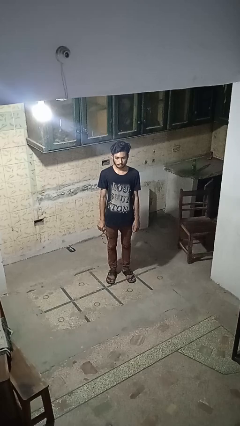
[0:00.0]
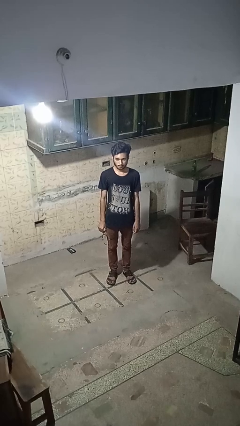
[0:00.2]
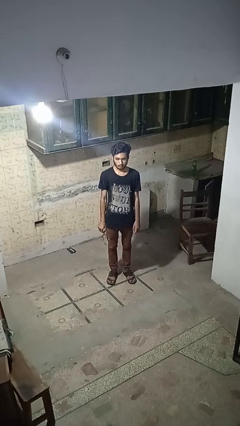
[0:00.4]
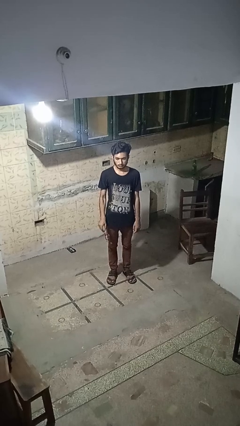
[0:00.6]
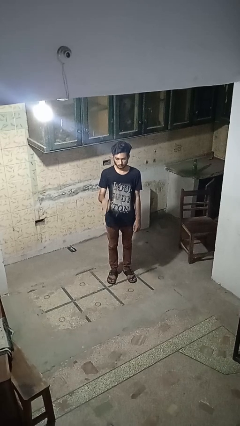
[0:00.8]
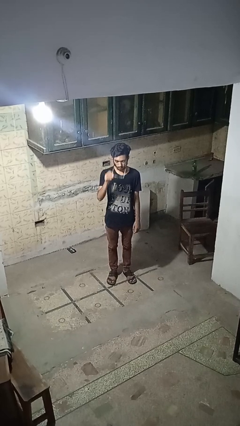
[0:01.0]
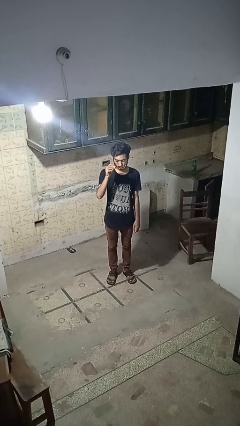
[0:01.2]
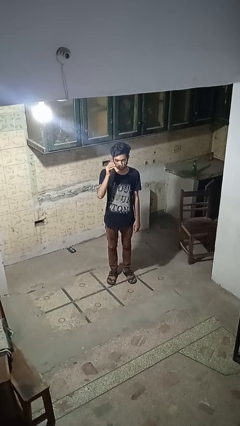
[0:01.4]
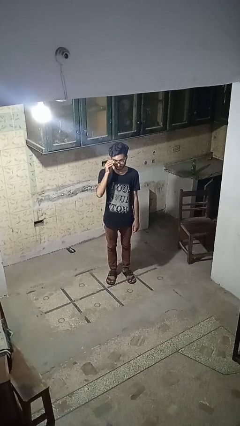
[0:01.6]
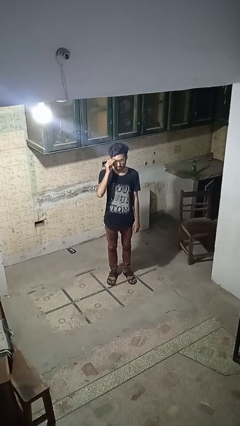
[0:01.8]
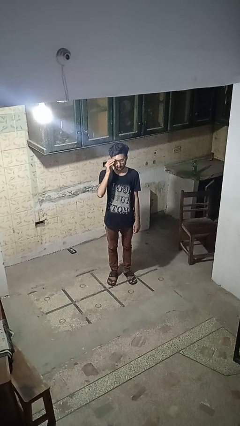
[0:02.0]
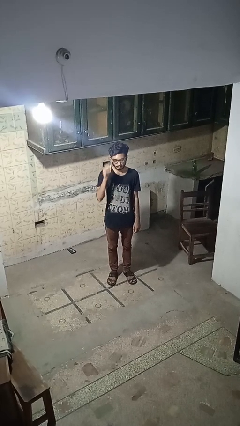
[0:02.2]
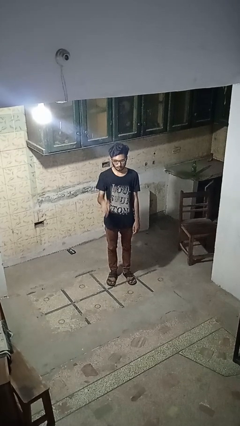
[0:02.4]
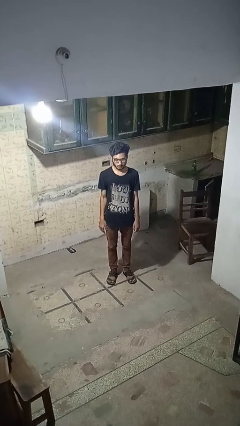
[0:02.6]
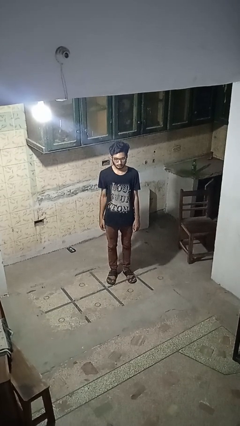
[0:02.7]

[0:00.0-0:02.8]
person puts on glasses

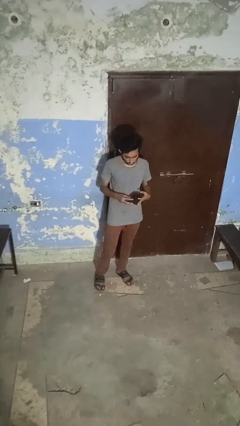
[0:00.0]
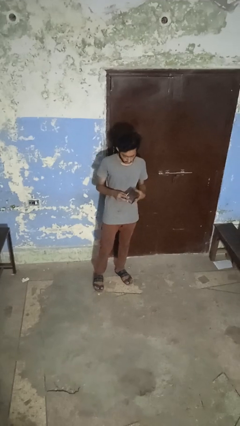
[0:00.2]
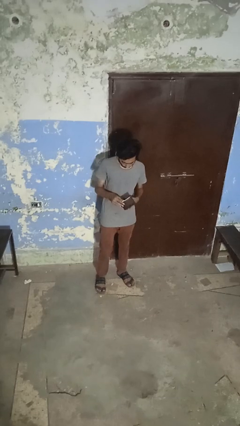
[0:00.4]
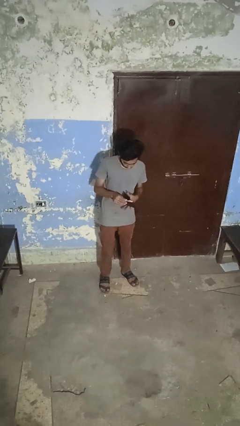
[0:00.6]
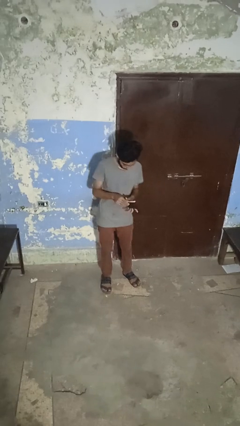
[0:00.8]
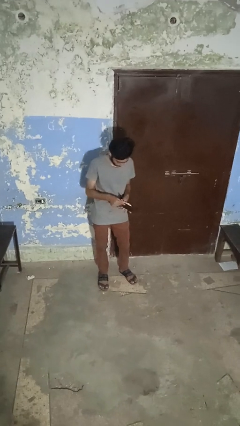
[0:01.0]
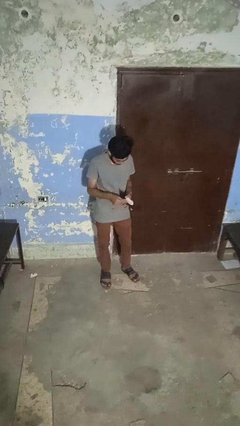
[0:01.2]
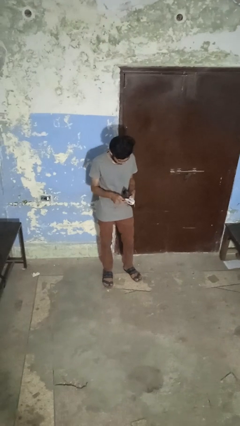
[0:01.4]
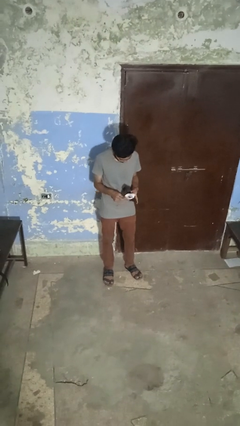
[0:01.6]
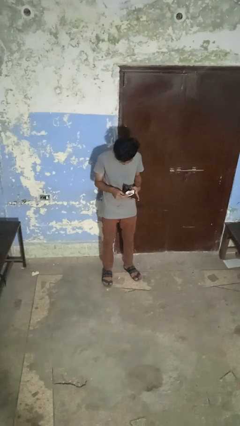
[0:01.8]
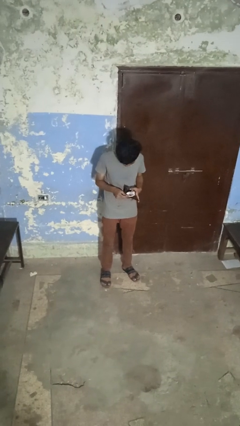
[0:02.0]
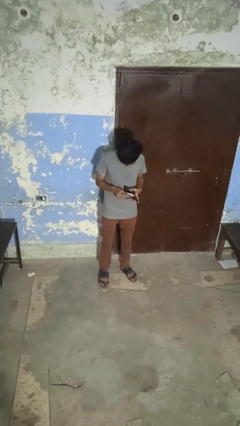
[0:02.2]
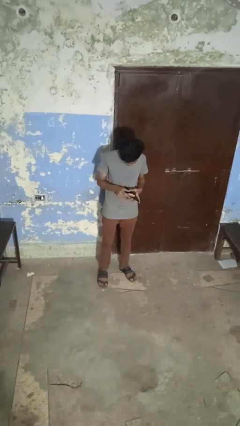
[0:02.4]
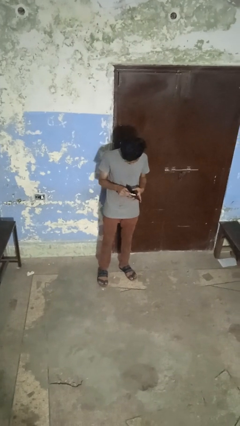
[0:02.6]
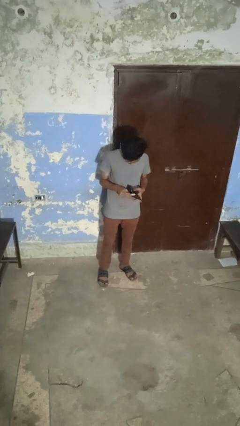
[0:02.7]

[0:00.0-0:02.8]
person searches in purse

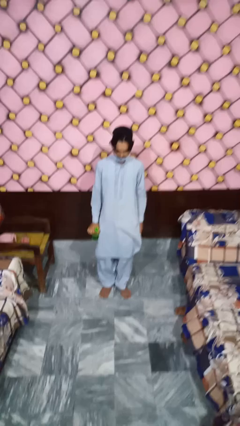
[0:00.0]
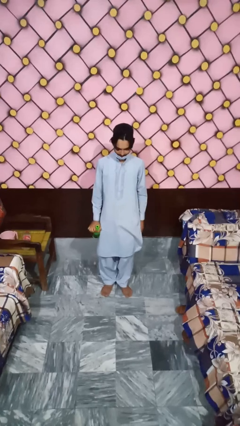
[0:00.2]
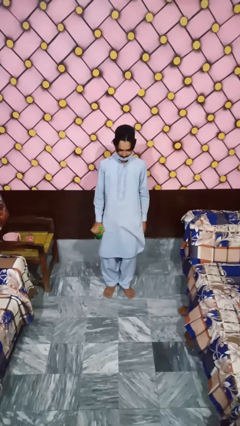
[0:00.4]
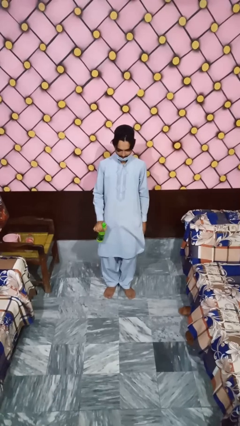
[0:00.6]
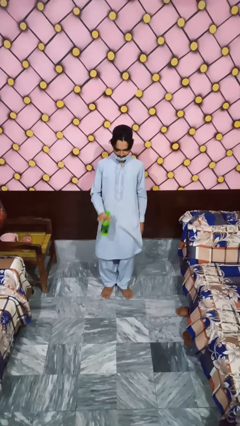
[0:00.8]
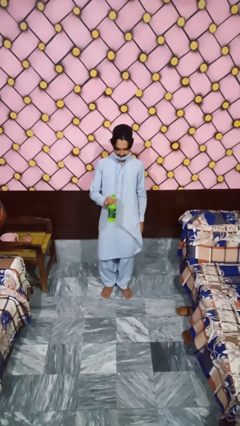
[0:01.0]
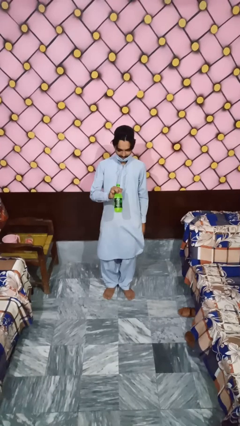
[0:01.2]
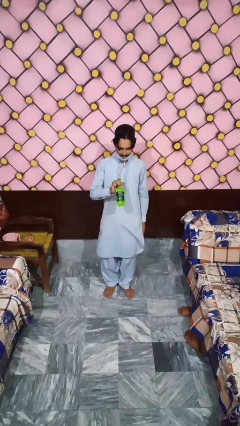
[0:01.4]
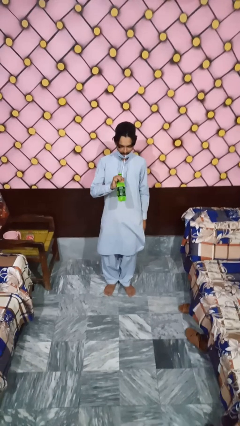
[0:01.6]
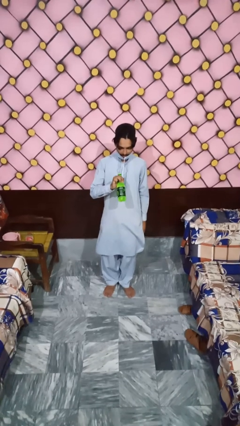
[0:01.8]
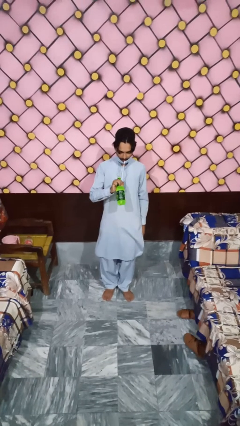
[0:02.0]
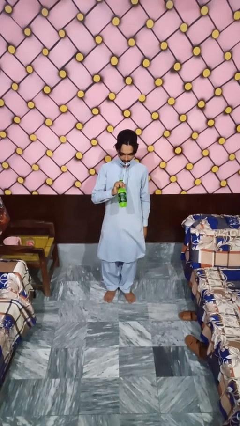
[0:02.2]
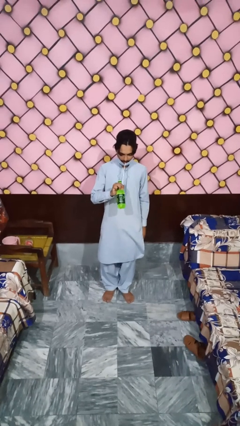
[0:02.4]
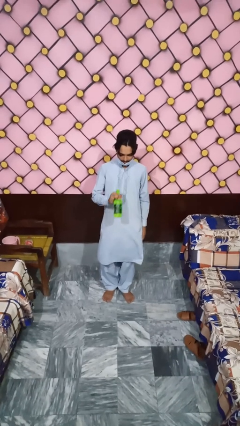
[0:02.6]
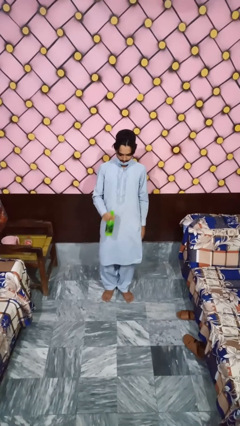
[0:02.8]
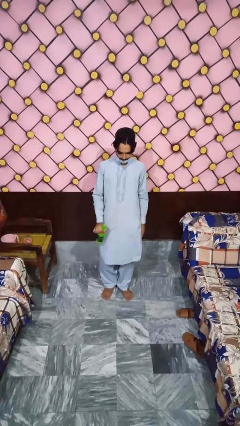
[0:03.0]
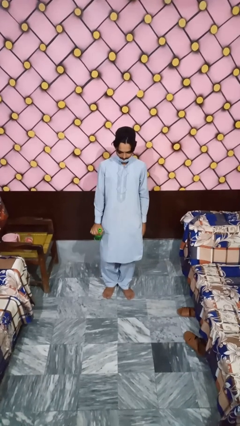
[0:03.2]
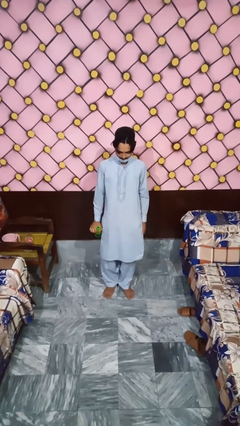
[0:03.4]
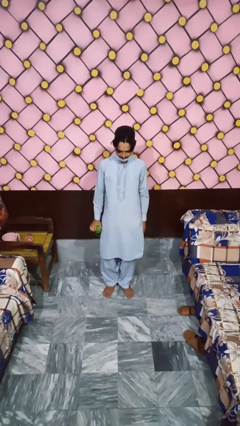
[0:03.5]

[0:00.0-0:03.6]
person drinks from straw

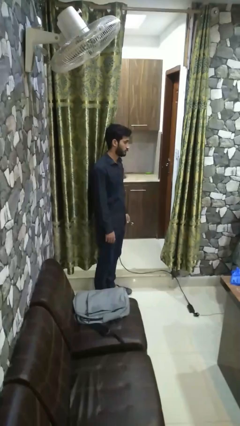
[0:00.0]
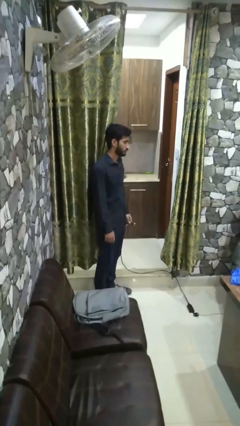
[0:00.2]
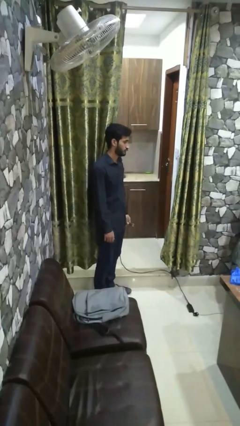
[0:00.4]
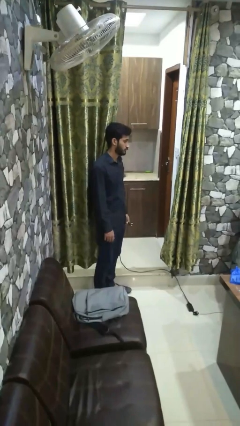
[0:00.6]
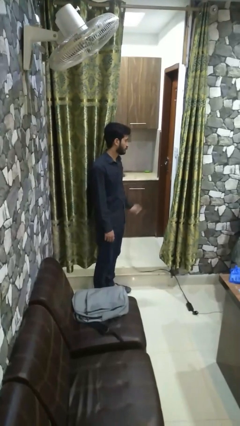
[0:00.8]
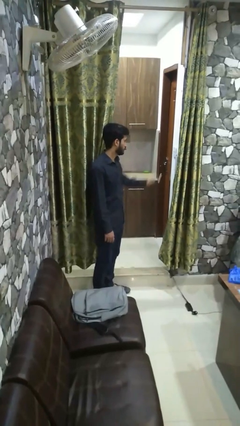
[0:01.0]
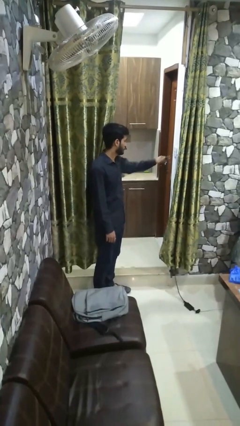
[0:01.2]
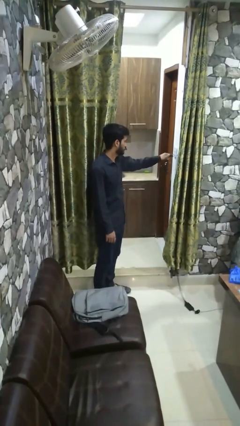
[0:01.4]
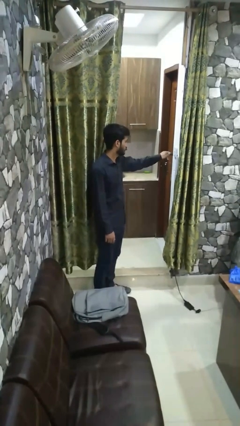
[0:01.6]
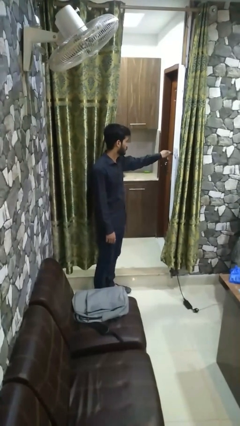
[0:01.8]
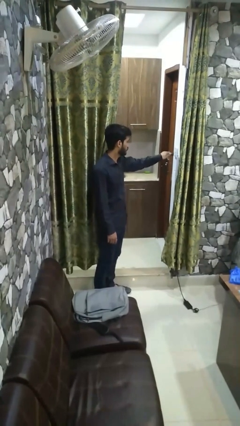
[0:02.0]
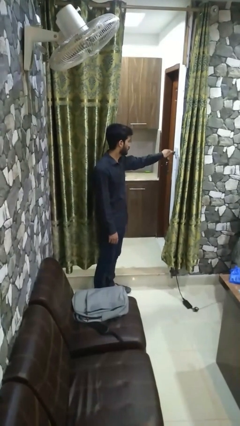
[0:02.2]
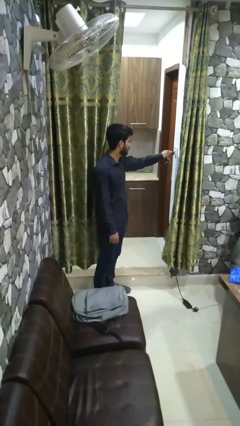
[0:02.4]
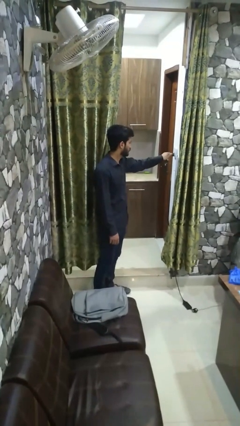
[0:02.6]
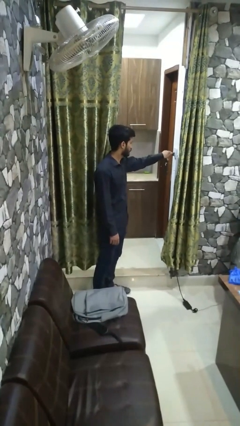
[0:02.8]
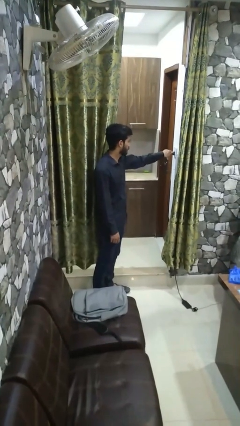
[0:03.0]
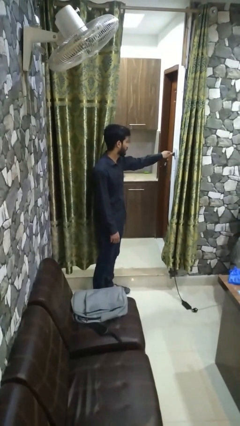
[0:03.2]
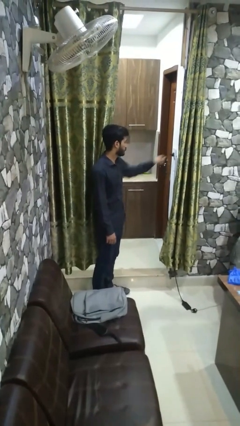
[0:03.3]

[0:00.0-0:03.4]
person plugs into electrical socket

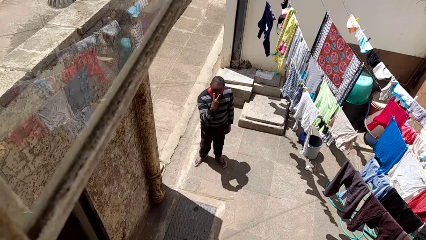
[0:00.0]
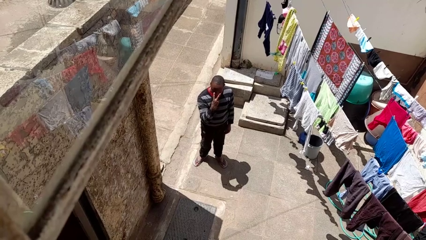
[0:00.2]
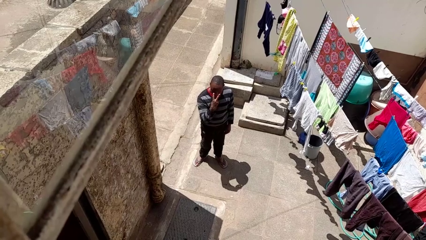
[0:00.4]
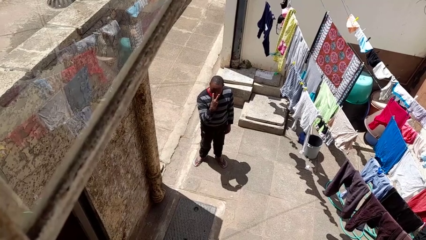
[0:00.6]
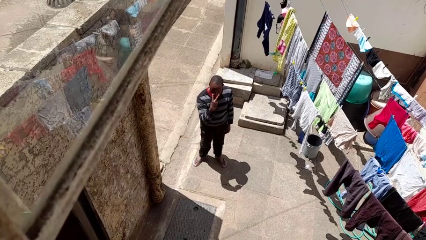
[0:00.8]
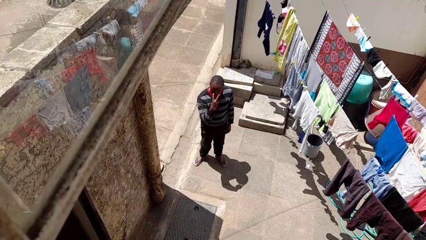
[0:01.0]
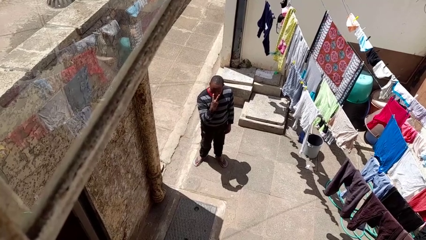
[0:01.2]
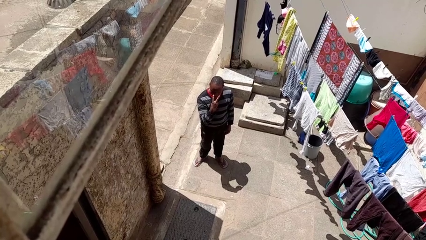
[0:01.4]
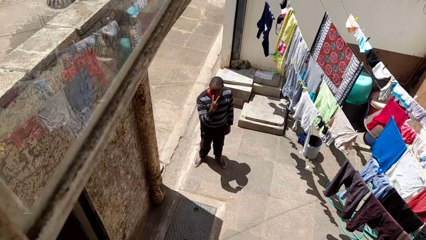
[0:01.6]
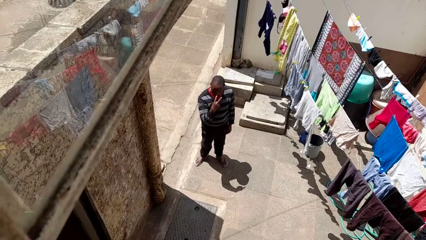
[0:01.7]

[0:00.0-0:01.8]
person gestures watch closely

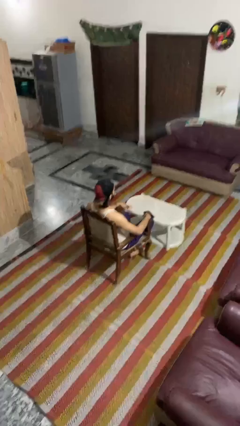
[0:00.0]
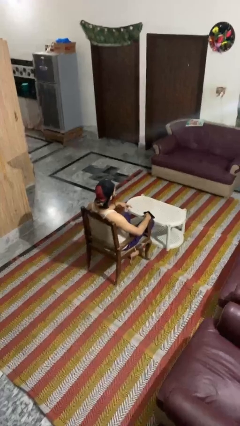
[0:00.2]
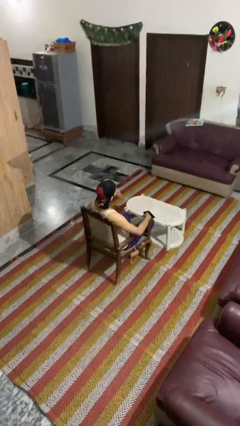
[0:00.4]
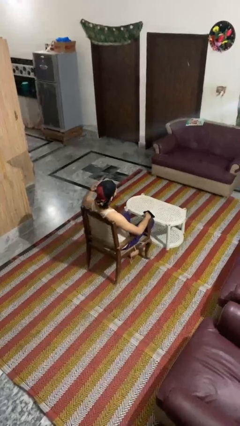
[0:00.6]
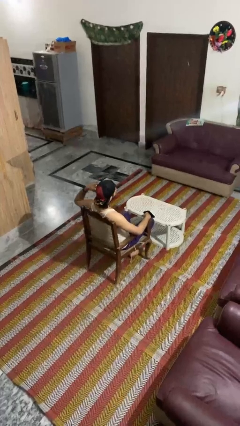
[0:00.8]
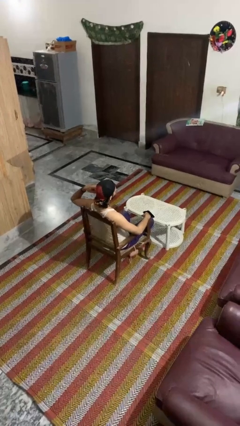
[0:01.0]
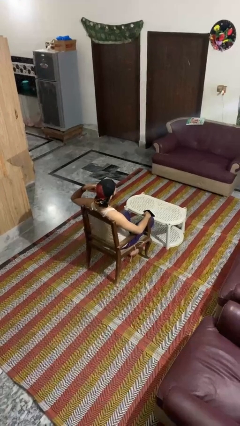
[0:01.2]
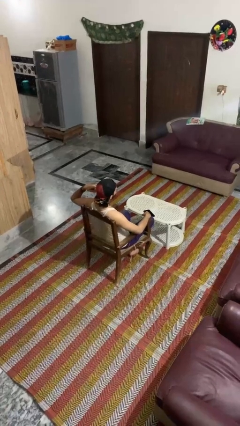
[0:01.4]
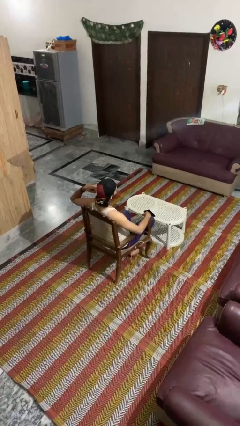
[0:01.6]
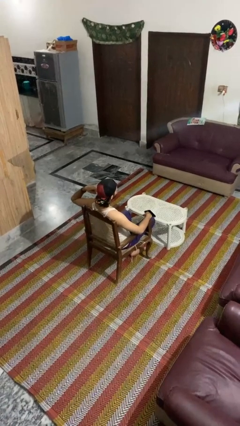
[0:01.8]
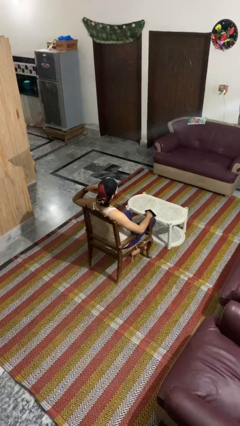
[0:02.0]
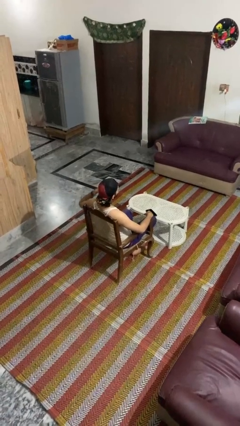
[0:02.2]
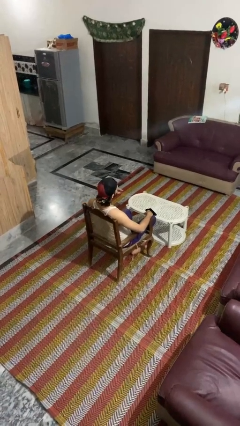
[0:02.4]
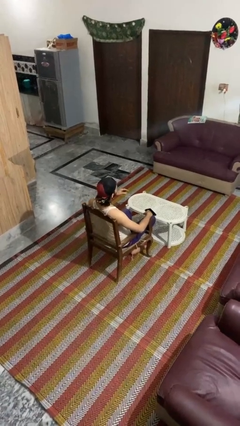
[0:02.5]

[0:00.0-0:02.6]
person gestures listen closely

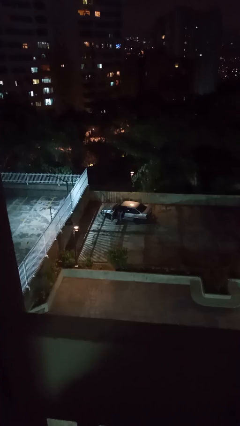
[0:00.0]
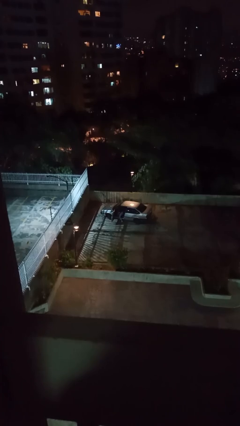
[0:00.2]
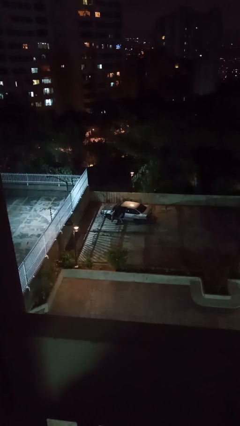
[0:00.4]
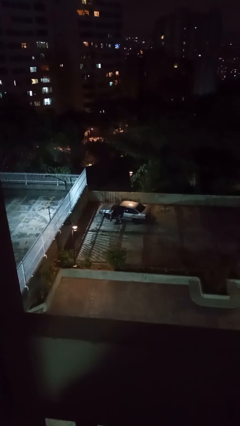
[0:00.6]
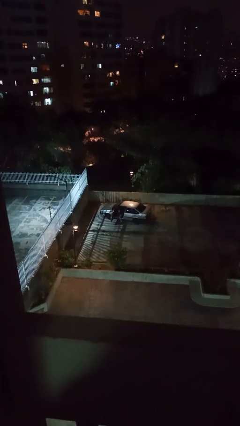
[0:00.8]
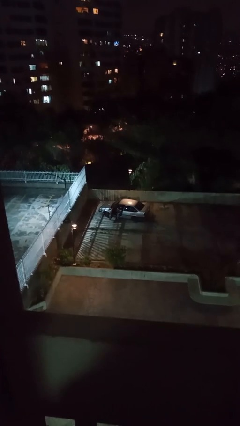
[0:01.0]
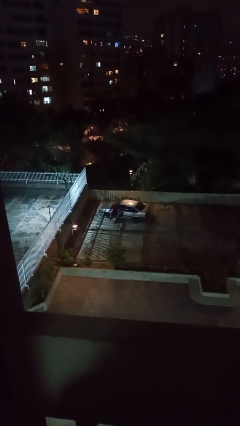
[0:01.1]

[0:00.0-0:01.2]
person enters car
